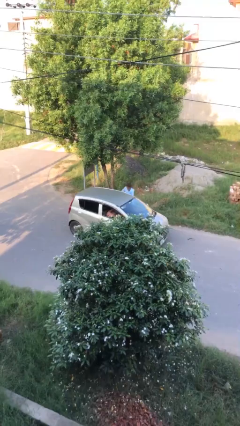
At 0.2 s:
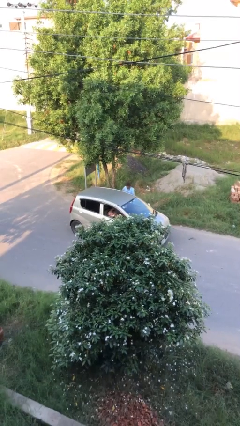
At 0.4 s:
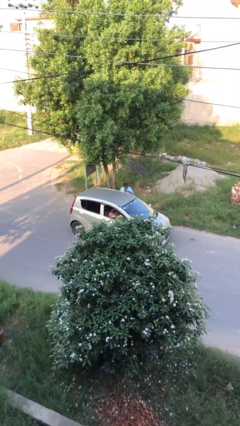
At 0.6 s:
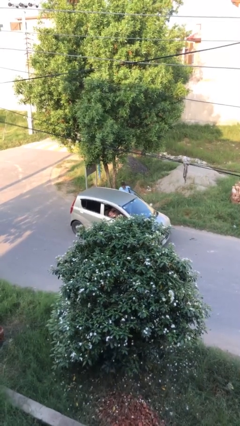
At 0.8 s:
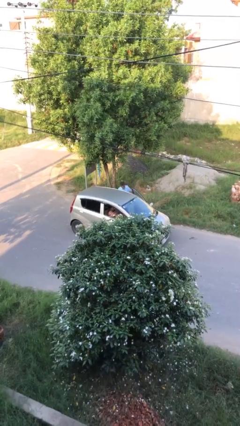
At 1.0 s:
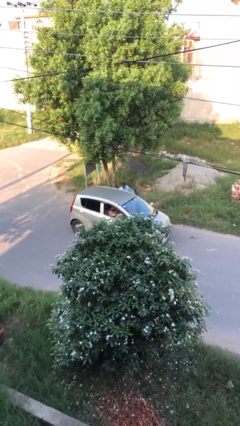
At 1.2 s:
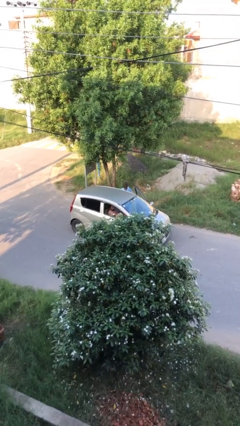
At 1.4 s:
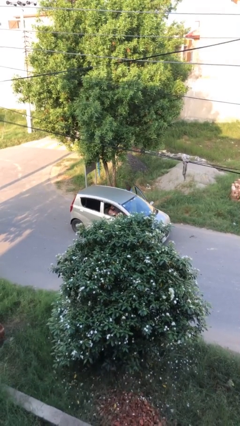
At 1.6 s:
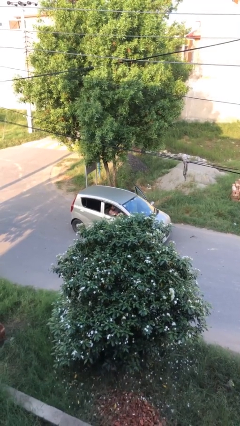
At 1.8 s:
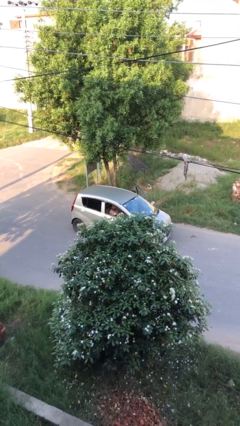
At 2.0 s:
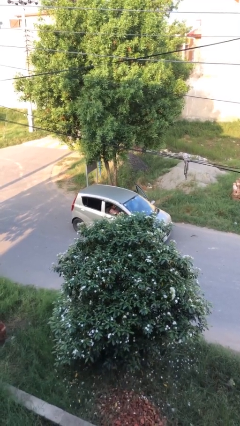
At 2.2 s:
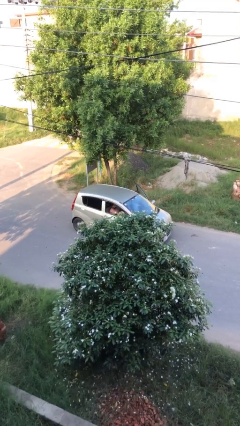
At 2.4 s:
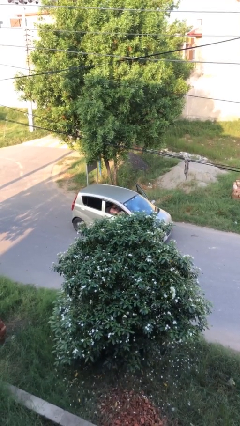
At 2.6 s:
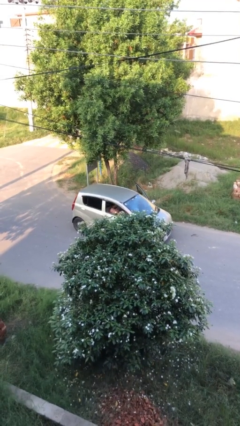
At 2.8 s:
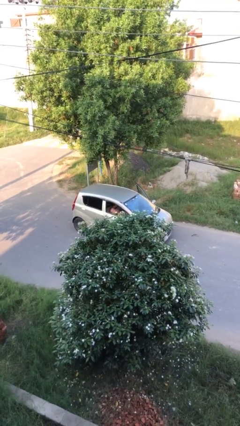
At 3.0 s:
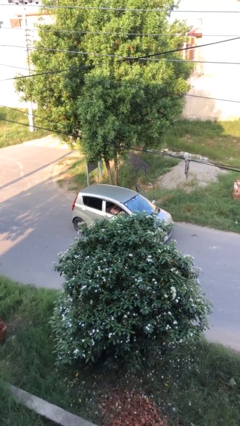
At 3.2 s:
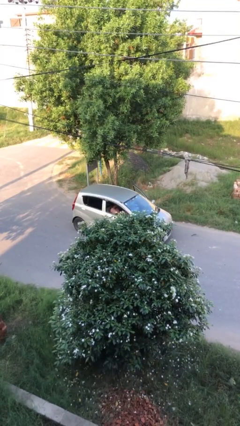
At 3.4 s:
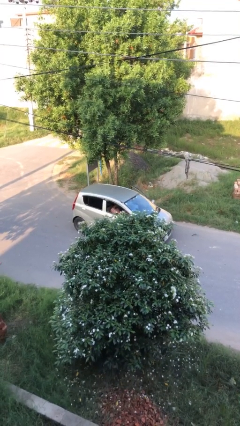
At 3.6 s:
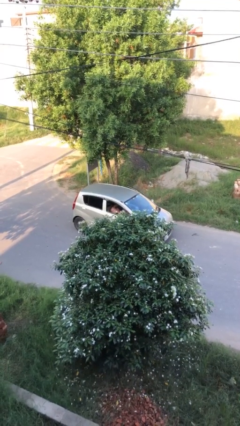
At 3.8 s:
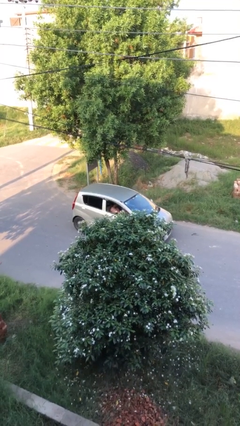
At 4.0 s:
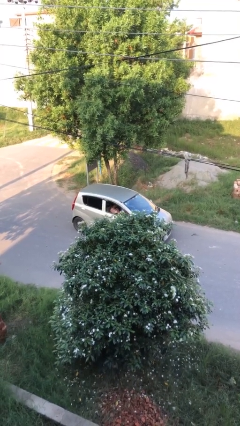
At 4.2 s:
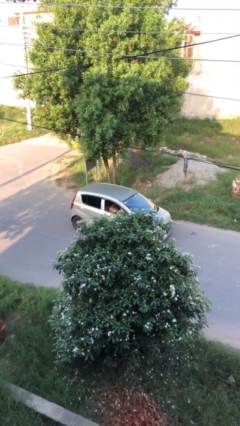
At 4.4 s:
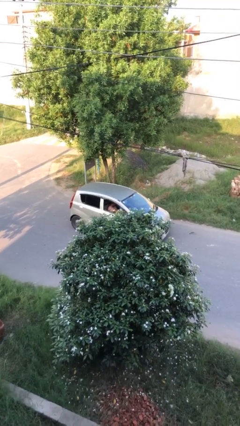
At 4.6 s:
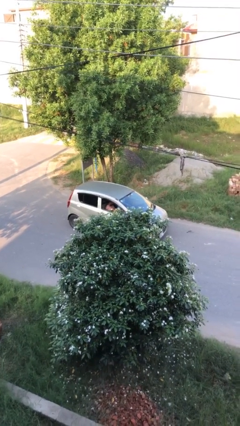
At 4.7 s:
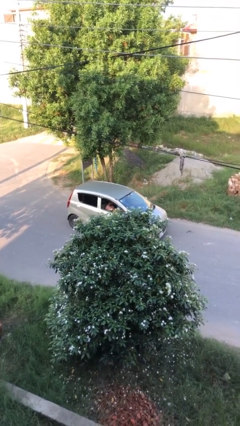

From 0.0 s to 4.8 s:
car picks up person

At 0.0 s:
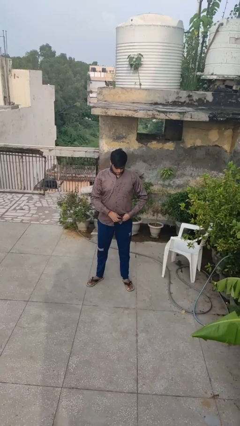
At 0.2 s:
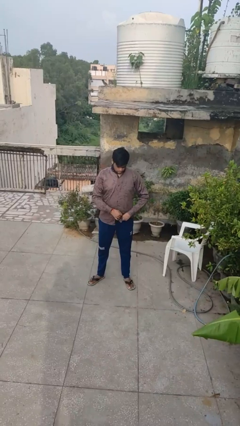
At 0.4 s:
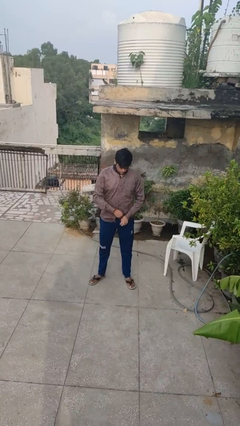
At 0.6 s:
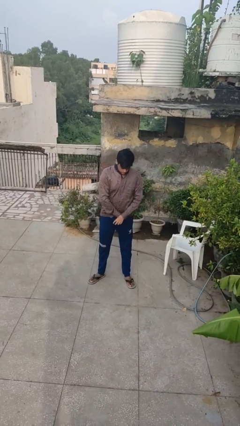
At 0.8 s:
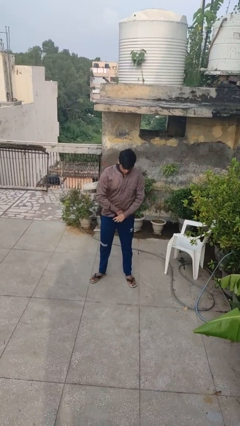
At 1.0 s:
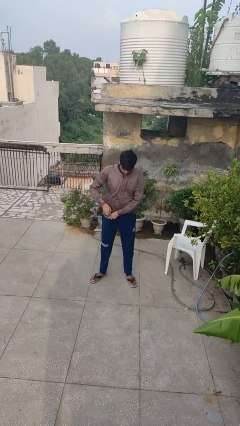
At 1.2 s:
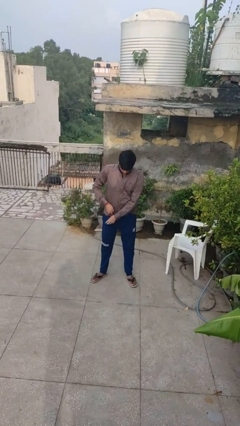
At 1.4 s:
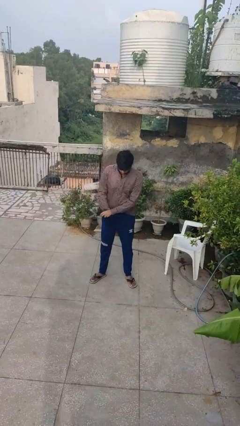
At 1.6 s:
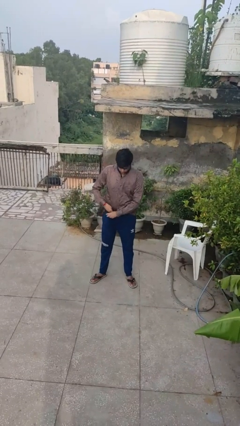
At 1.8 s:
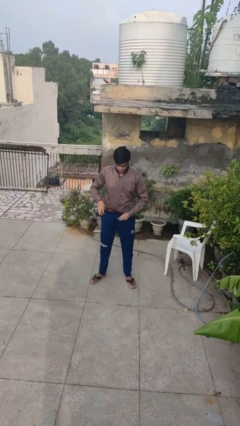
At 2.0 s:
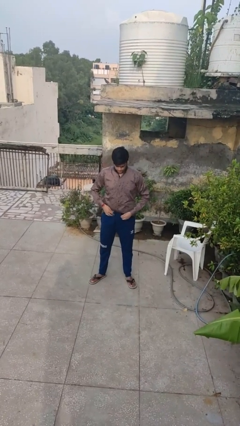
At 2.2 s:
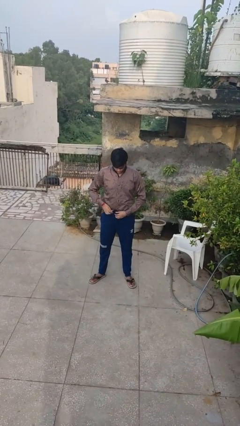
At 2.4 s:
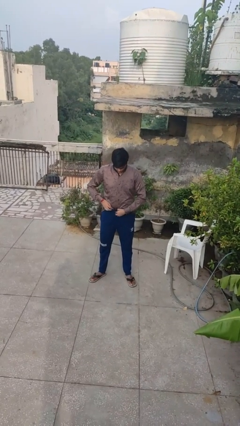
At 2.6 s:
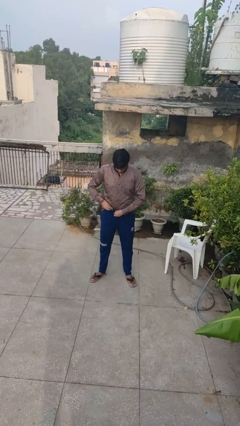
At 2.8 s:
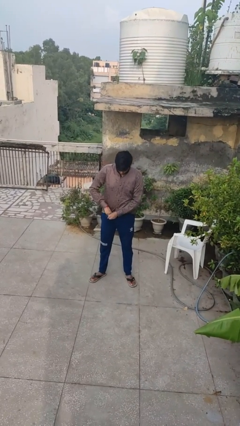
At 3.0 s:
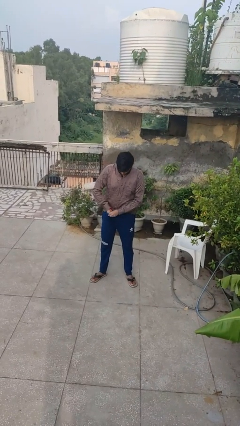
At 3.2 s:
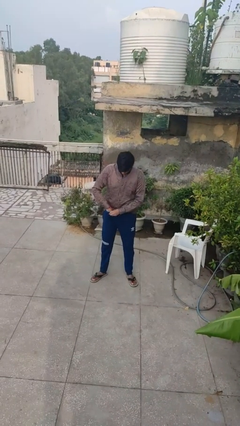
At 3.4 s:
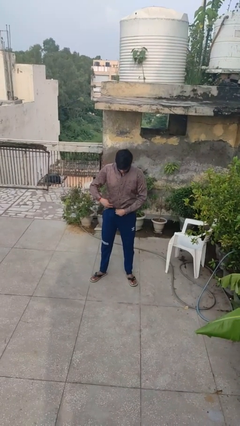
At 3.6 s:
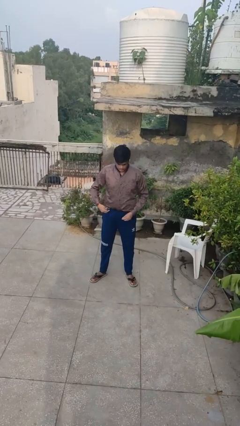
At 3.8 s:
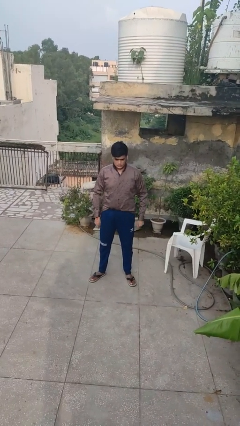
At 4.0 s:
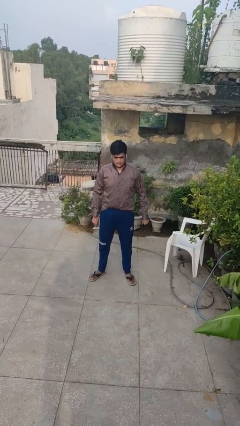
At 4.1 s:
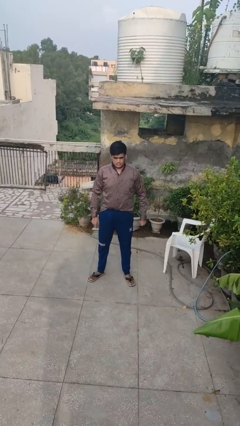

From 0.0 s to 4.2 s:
person tucks in shirt

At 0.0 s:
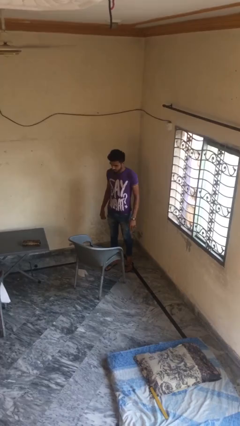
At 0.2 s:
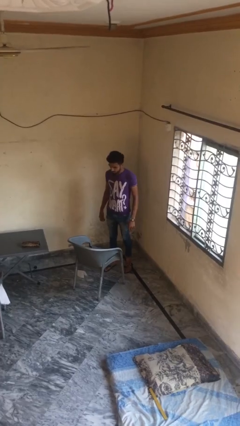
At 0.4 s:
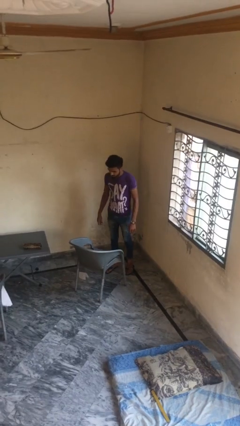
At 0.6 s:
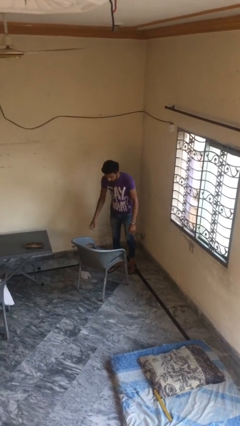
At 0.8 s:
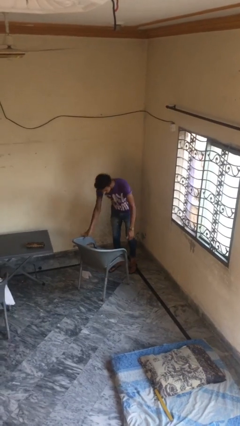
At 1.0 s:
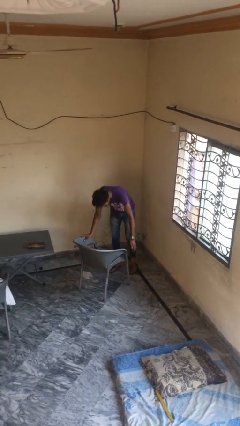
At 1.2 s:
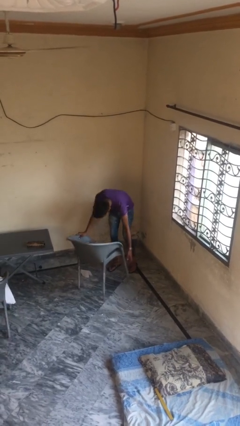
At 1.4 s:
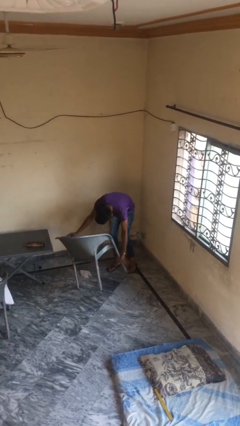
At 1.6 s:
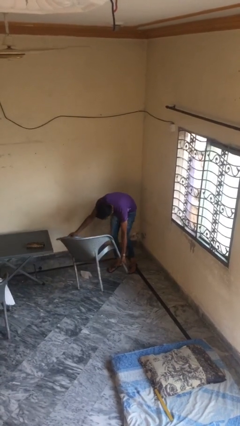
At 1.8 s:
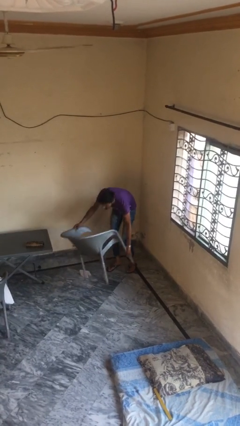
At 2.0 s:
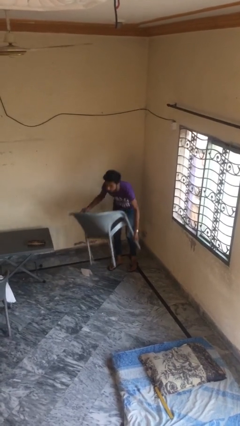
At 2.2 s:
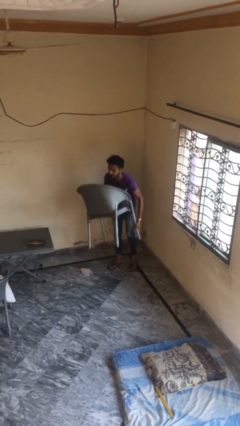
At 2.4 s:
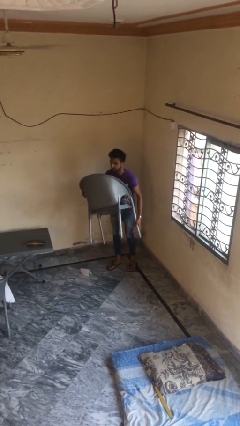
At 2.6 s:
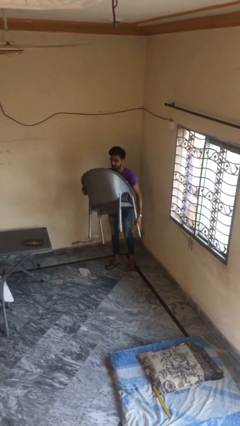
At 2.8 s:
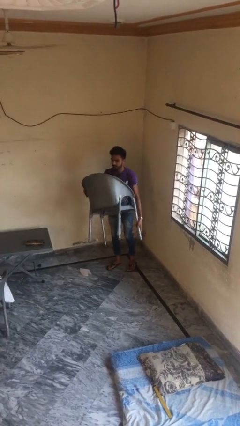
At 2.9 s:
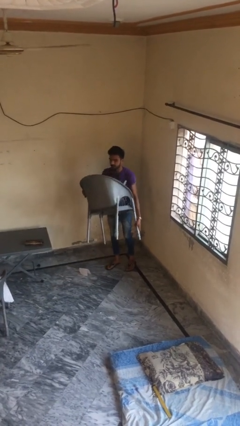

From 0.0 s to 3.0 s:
person picks up object from floor

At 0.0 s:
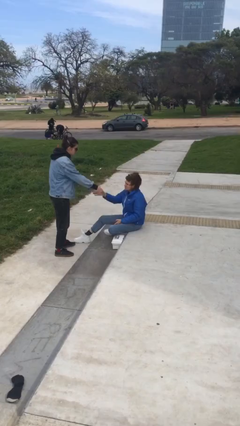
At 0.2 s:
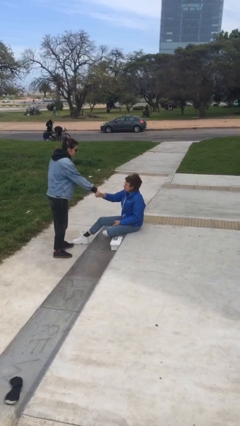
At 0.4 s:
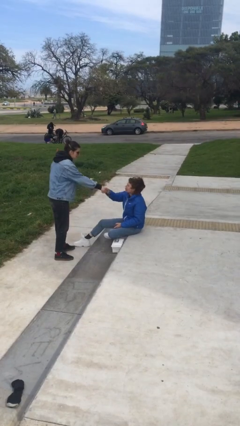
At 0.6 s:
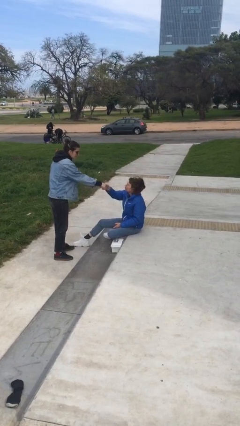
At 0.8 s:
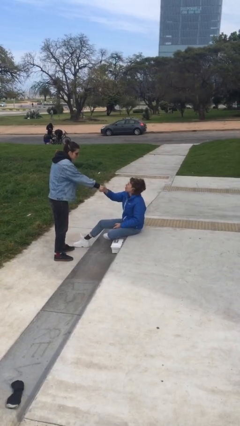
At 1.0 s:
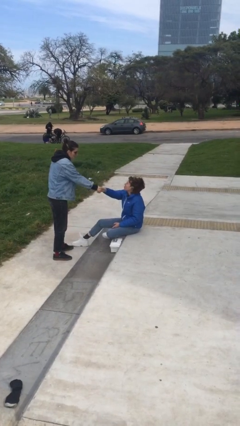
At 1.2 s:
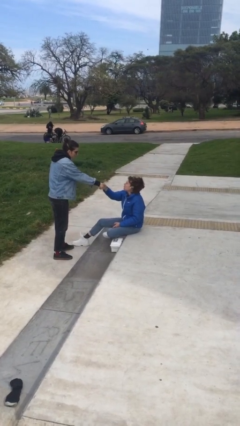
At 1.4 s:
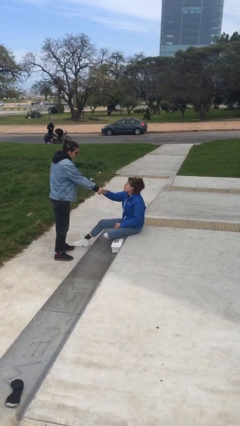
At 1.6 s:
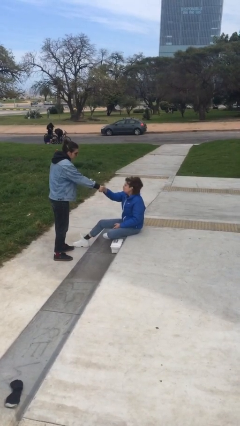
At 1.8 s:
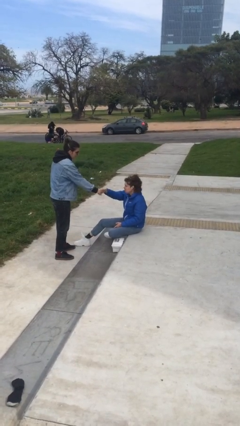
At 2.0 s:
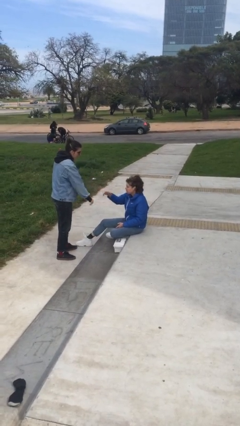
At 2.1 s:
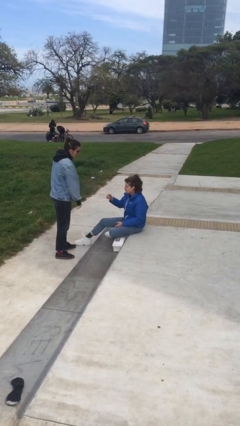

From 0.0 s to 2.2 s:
person shakes hand

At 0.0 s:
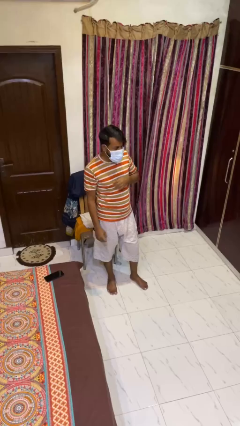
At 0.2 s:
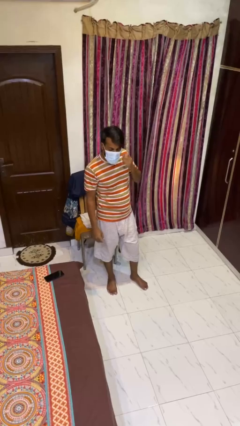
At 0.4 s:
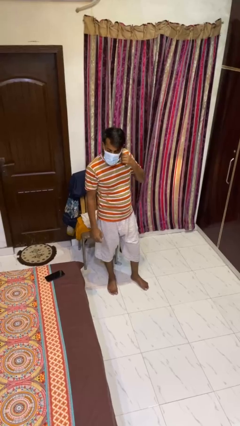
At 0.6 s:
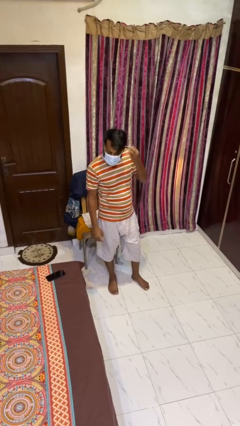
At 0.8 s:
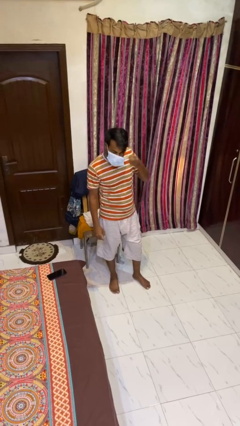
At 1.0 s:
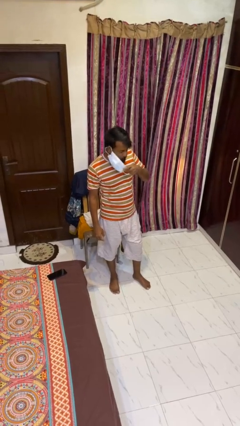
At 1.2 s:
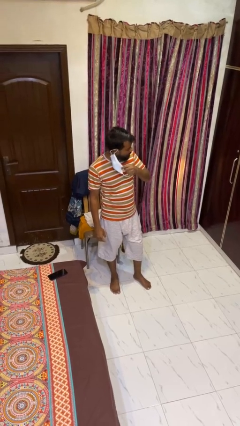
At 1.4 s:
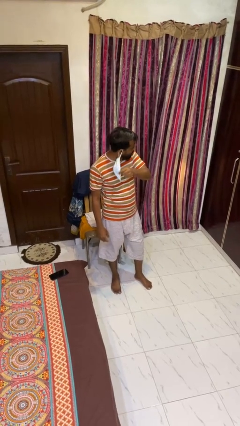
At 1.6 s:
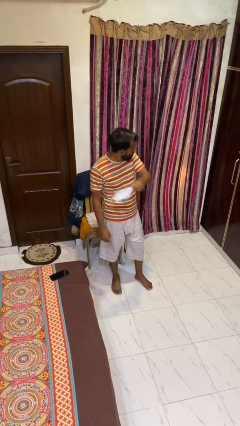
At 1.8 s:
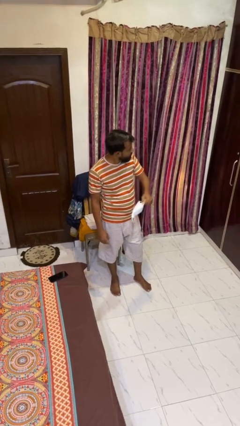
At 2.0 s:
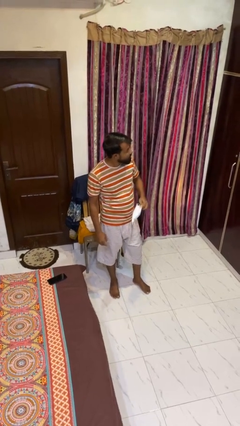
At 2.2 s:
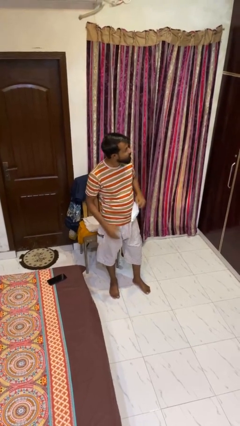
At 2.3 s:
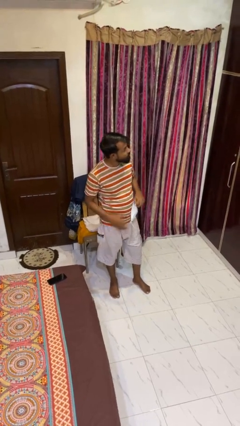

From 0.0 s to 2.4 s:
person takes off facemask

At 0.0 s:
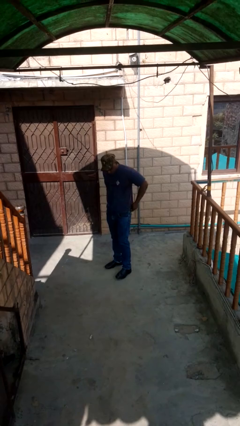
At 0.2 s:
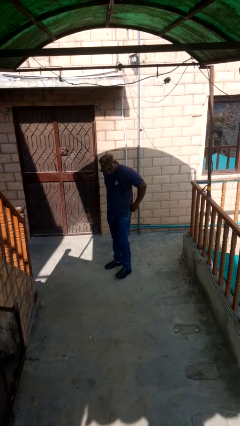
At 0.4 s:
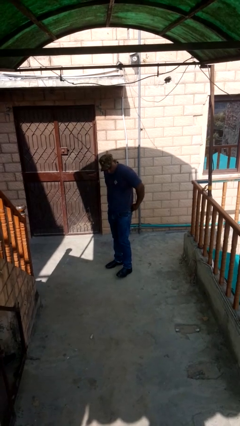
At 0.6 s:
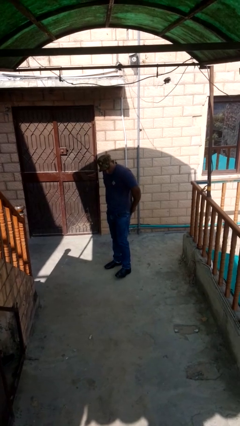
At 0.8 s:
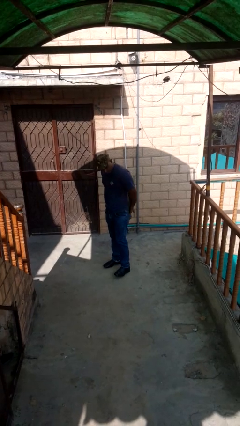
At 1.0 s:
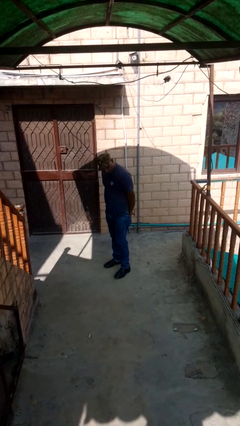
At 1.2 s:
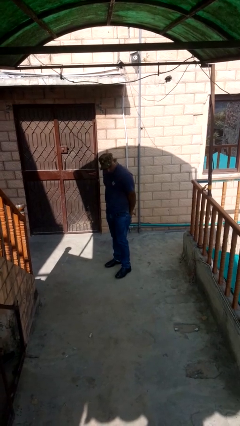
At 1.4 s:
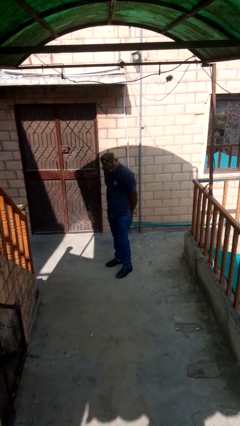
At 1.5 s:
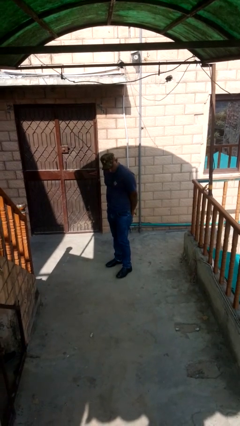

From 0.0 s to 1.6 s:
person puts hands in back pockets
